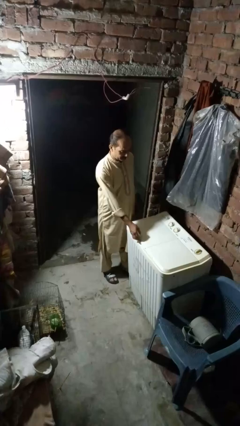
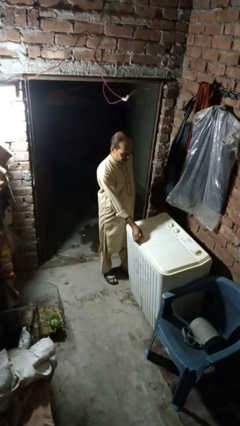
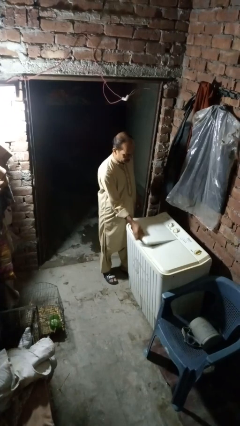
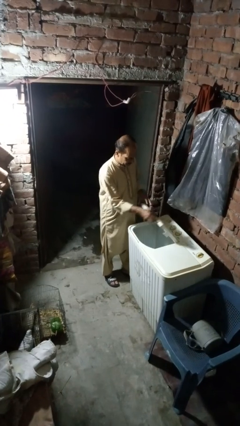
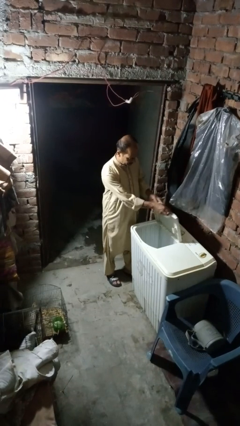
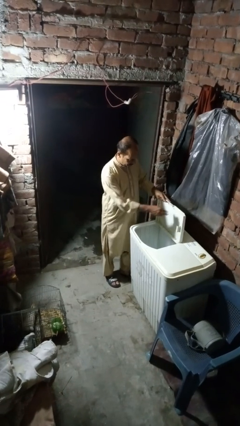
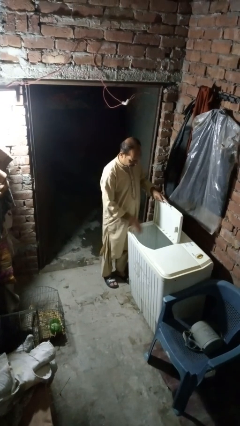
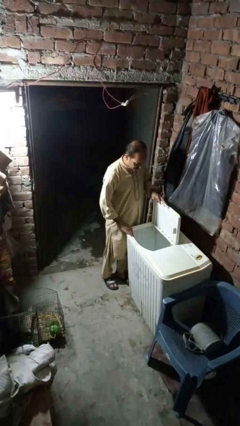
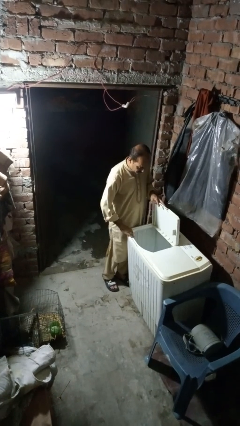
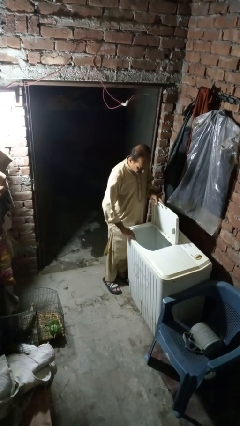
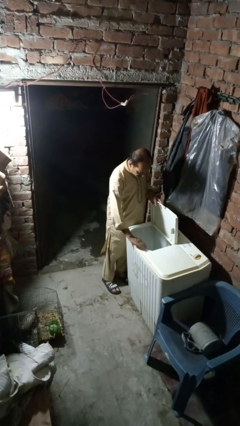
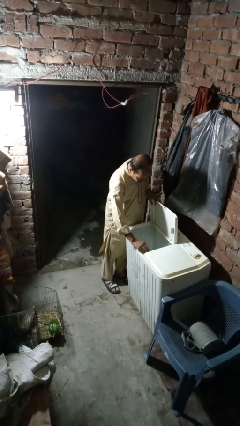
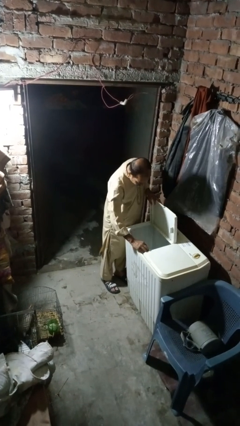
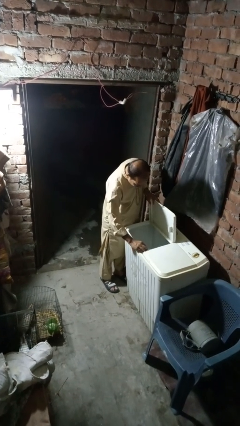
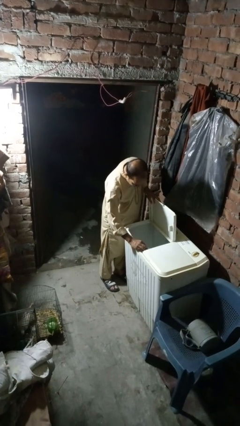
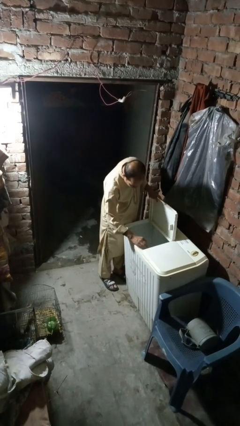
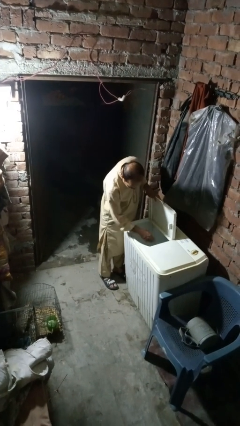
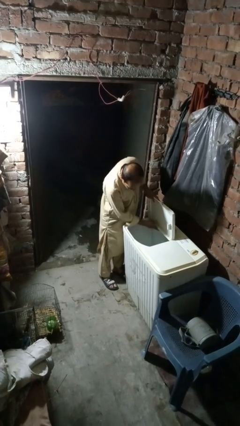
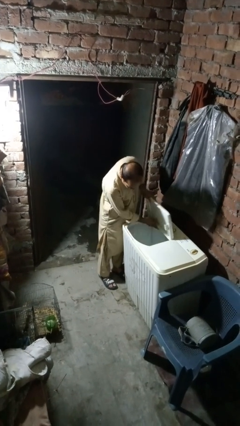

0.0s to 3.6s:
person opens clothes washer

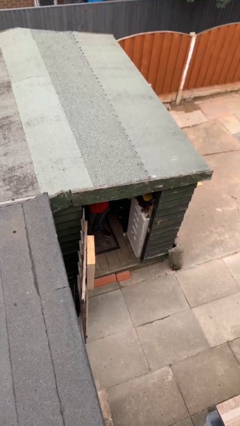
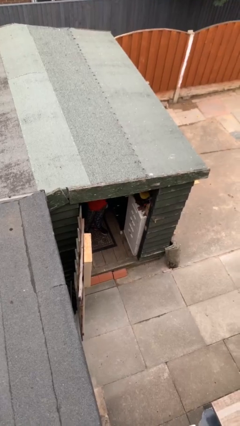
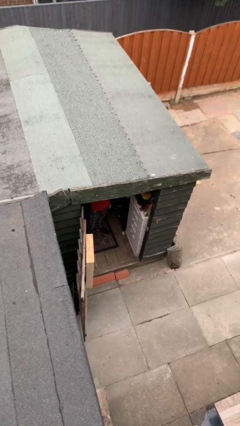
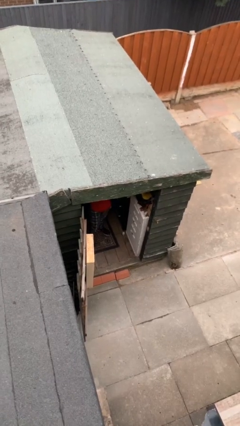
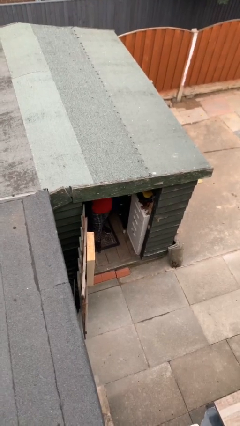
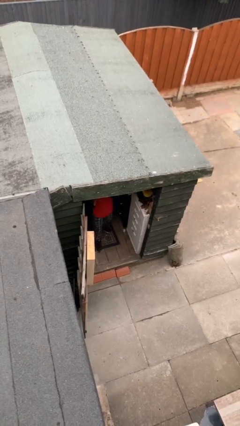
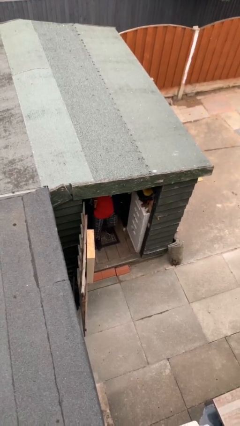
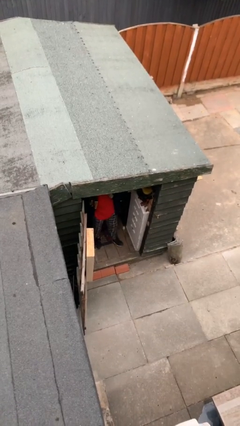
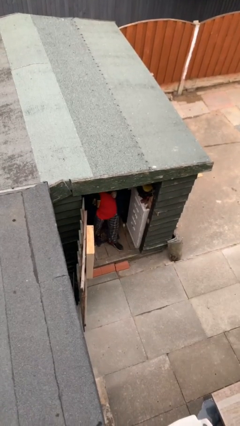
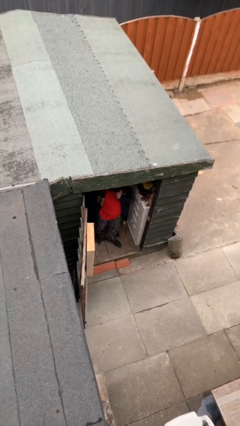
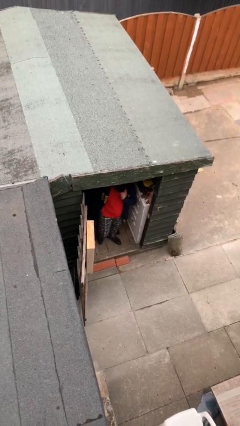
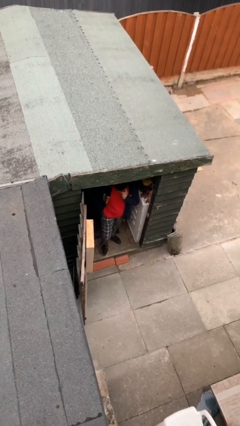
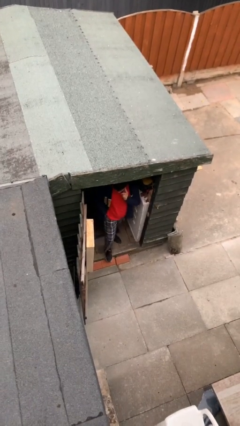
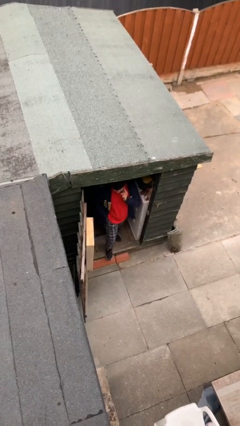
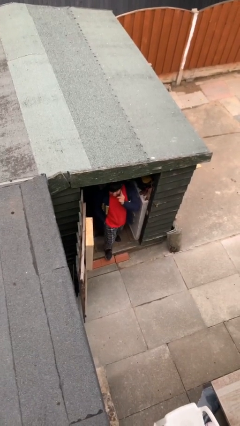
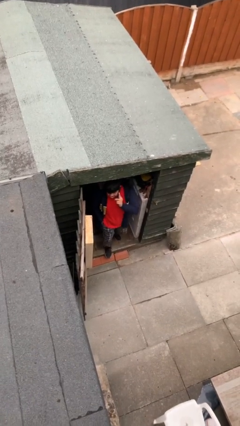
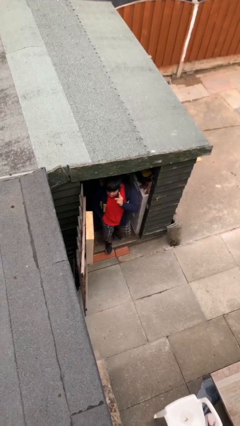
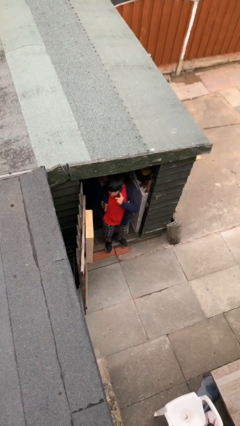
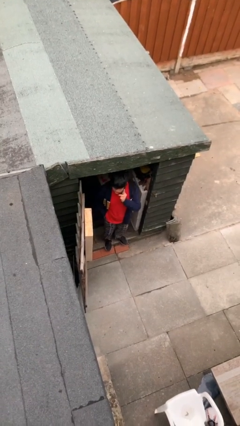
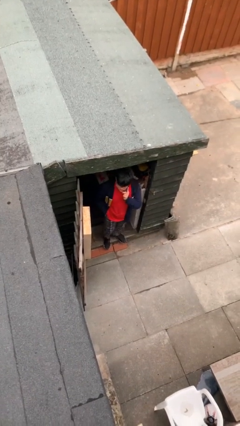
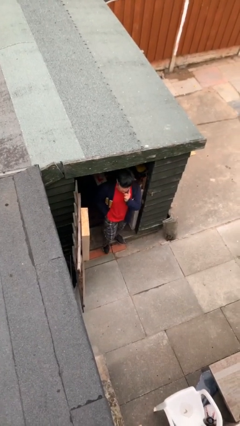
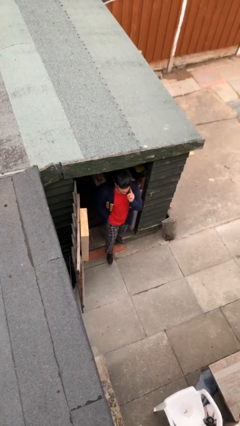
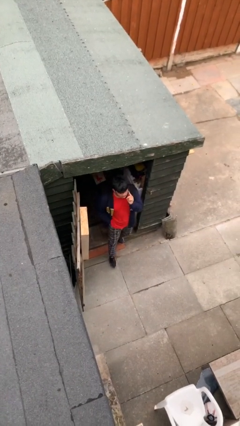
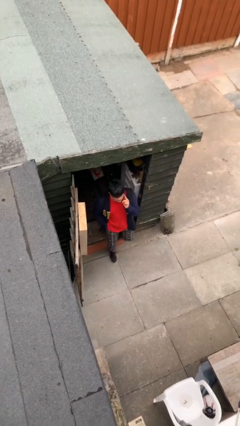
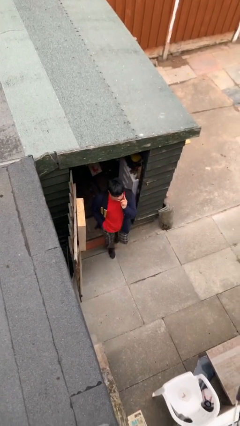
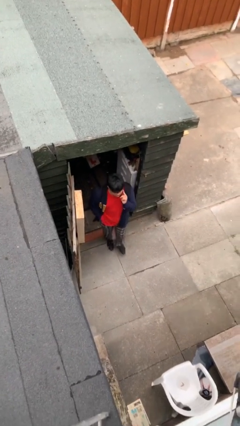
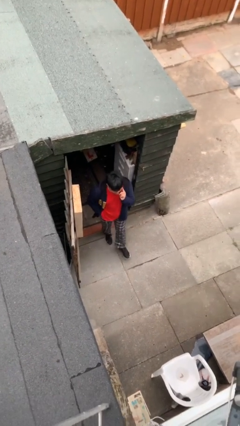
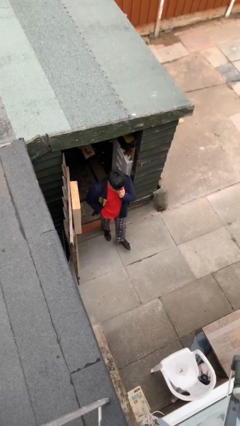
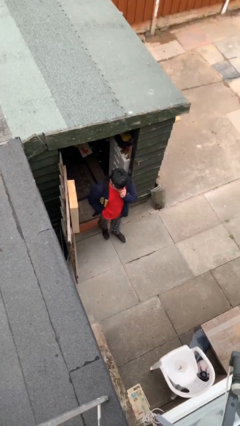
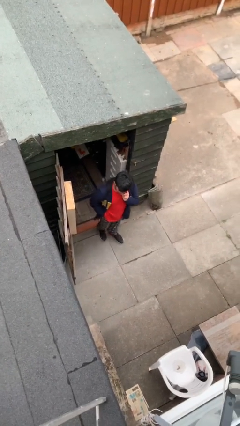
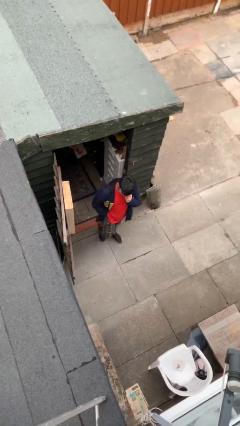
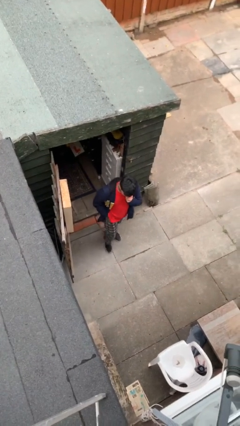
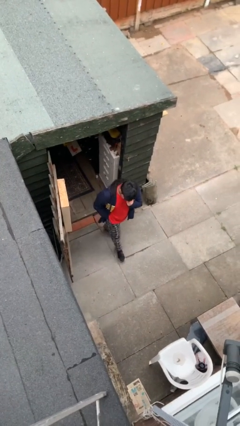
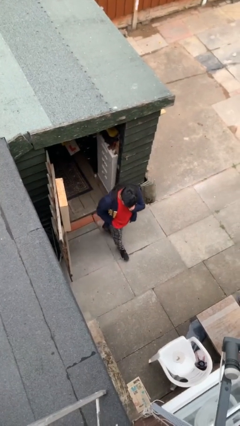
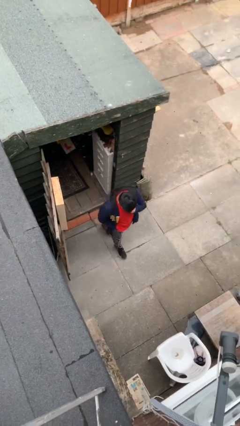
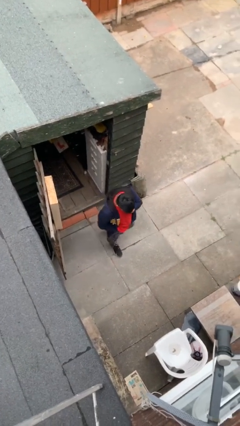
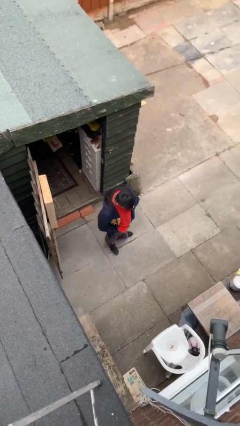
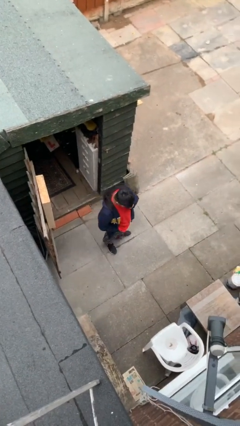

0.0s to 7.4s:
person enters scene through structure

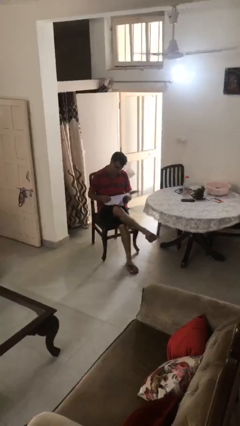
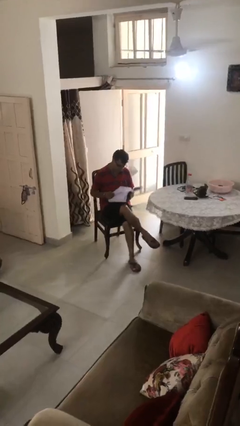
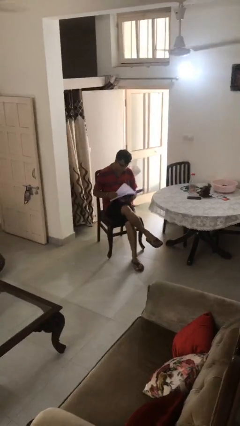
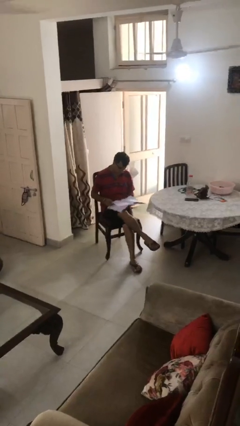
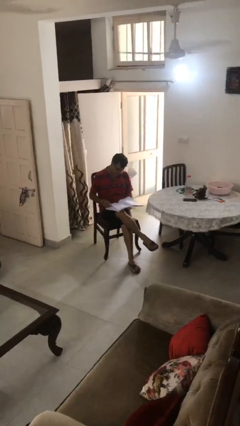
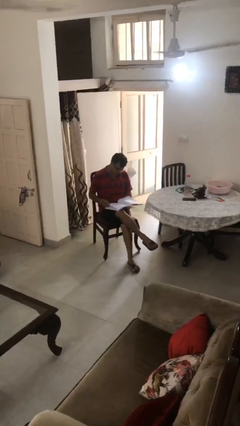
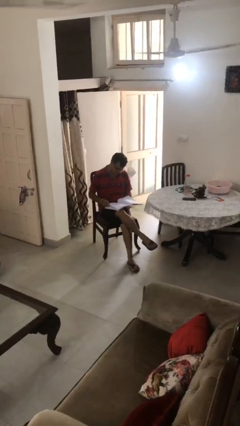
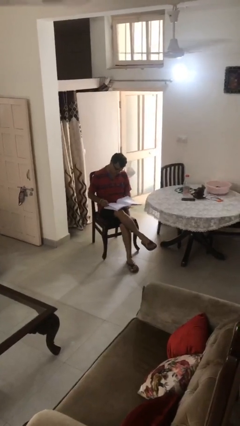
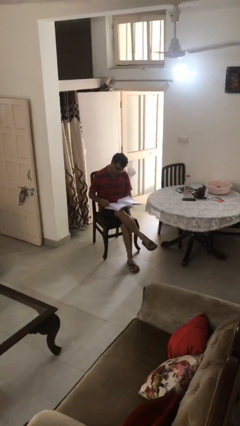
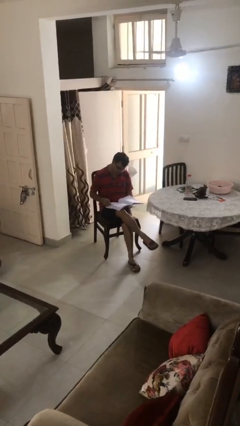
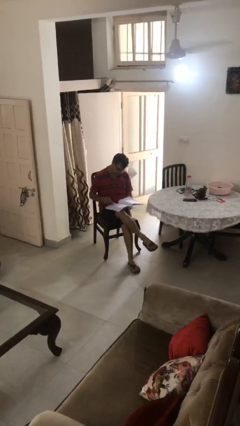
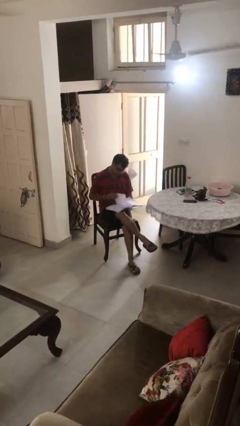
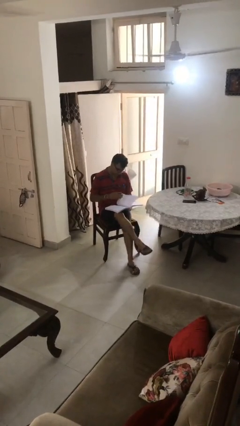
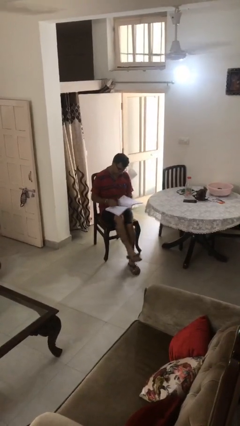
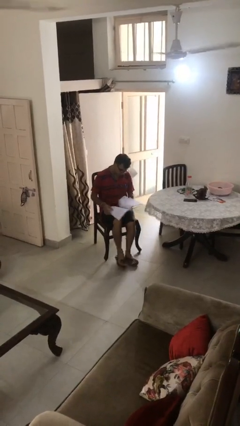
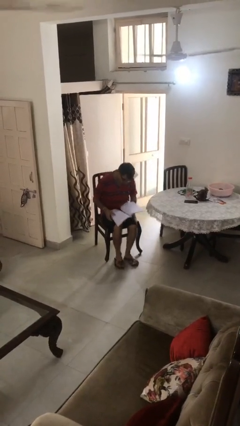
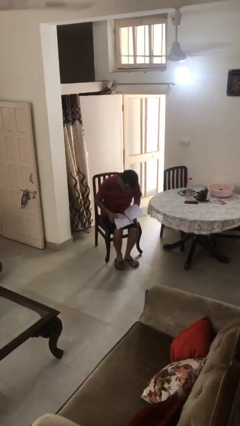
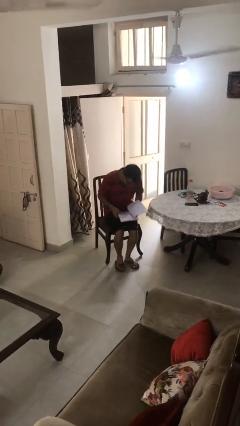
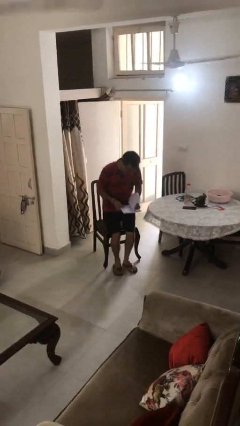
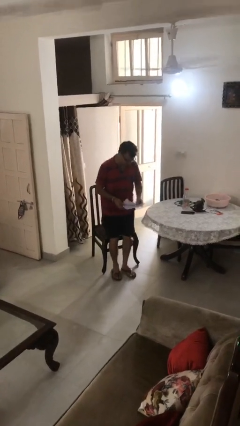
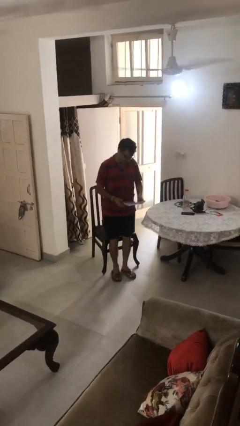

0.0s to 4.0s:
person reads document

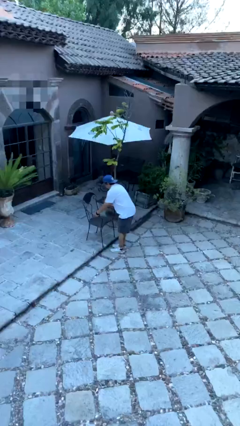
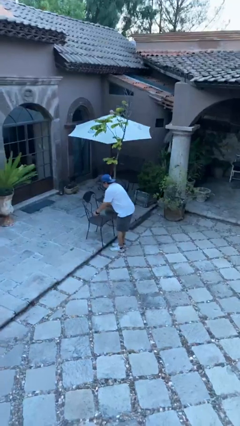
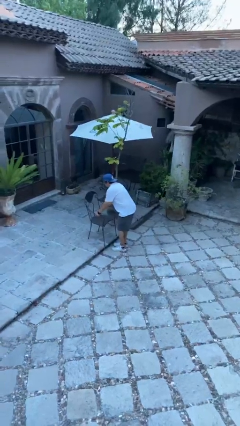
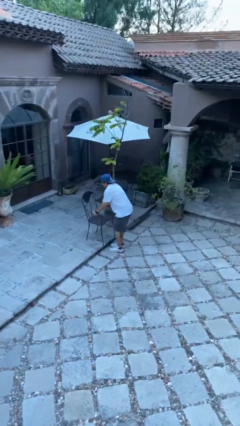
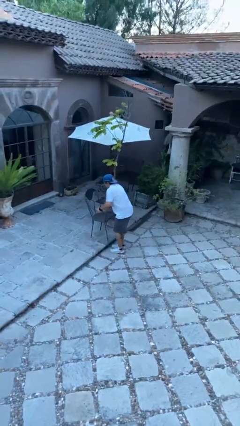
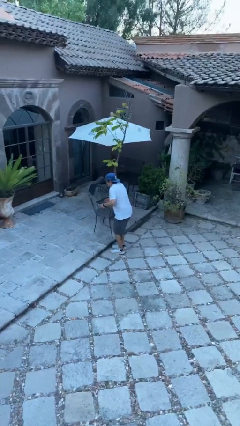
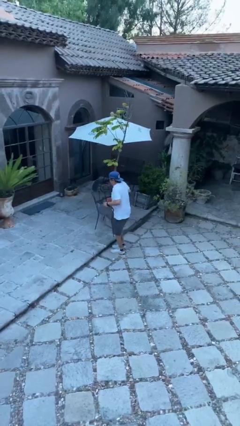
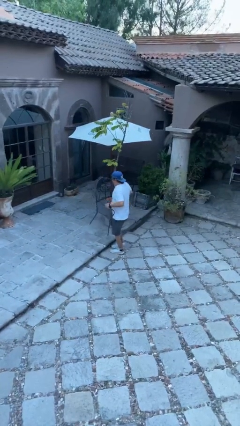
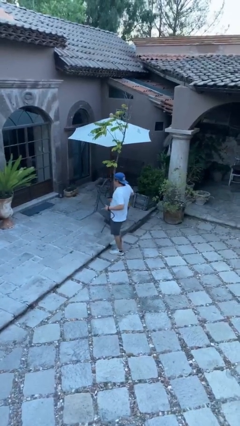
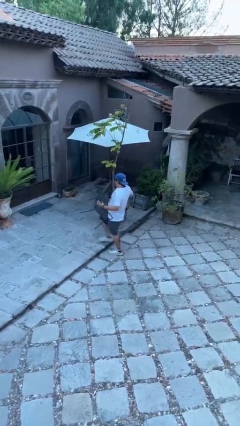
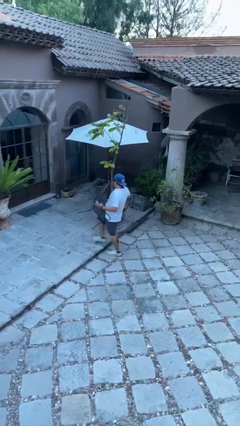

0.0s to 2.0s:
person picks up object from floor

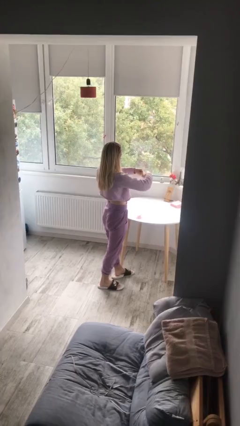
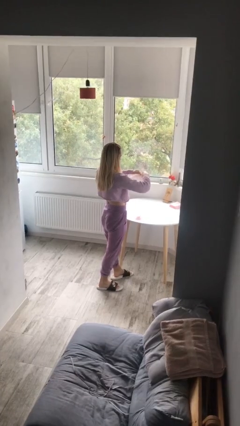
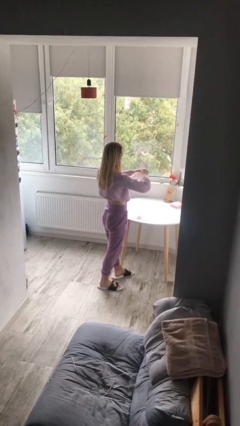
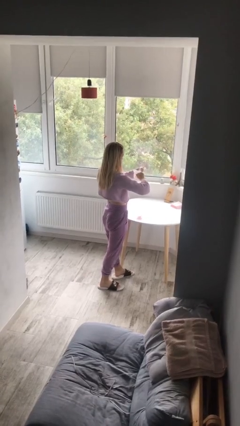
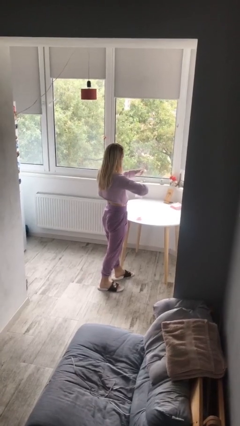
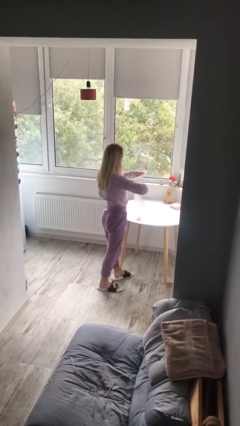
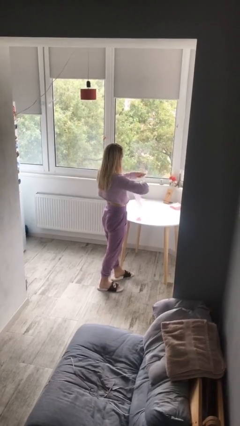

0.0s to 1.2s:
person tears paper
